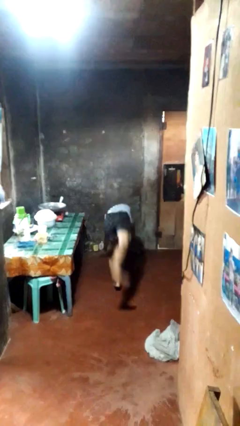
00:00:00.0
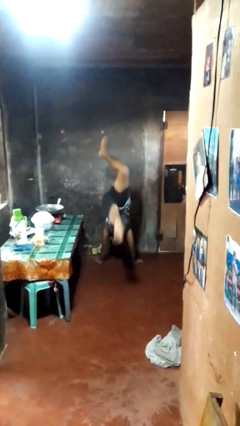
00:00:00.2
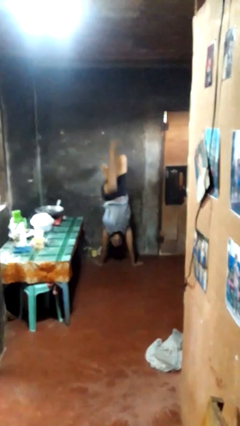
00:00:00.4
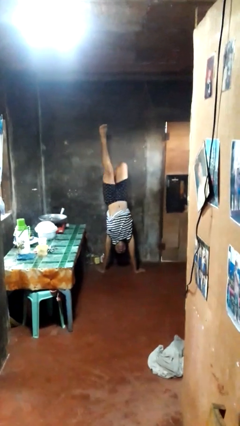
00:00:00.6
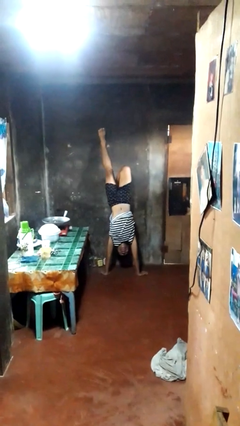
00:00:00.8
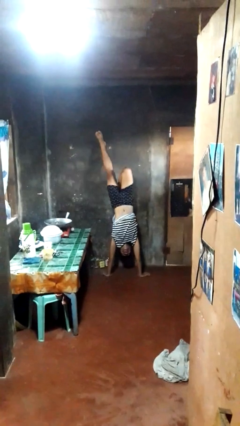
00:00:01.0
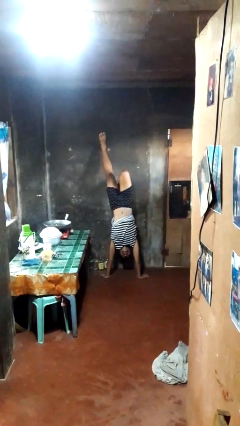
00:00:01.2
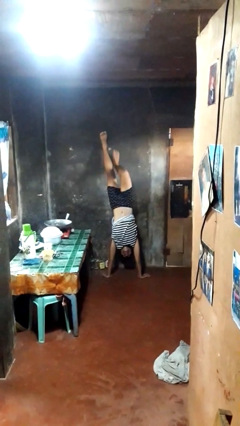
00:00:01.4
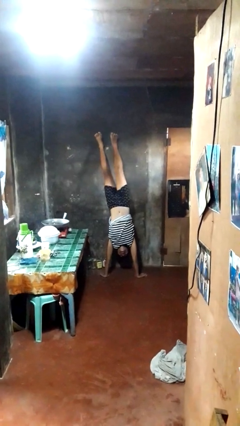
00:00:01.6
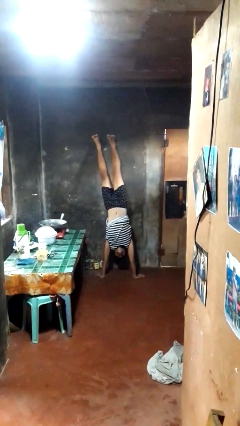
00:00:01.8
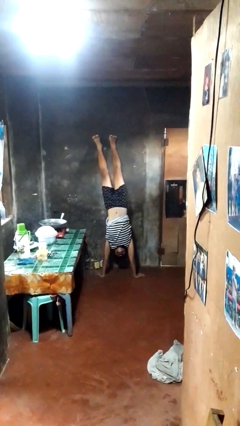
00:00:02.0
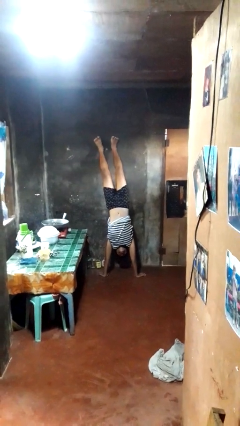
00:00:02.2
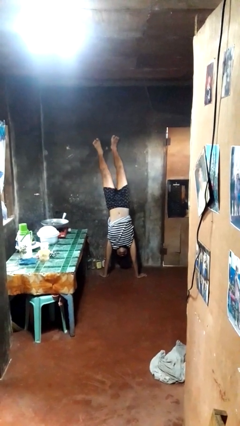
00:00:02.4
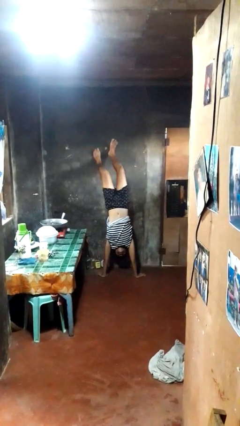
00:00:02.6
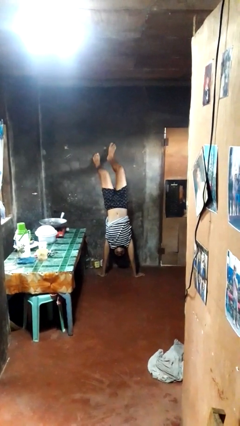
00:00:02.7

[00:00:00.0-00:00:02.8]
person handstand

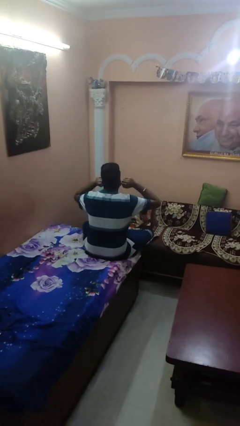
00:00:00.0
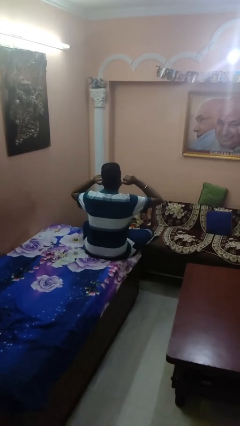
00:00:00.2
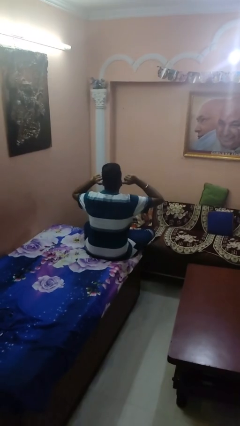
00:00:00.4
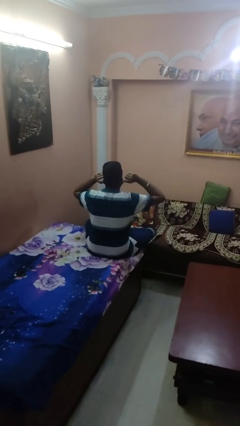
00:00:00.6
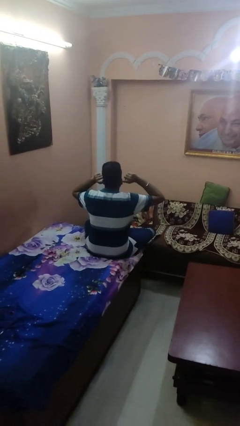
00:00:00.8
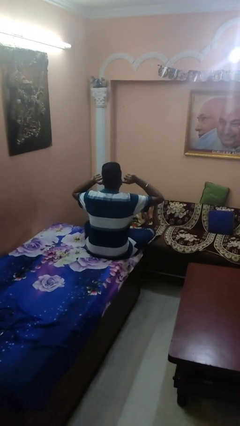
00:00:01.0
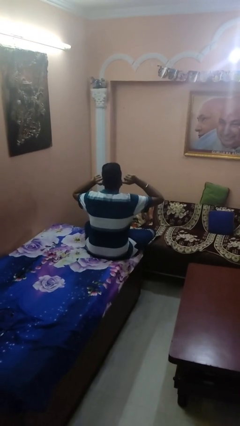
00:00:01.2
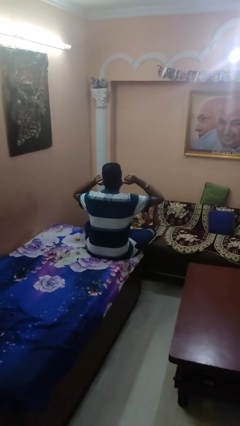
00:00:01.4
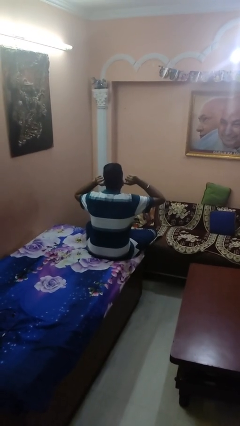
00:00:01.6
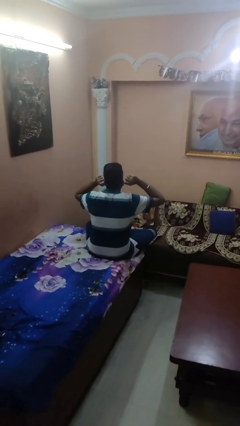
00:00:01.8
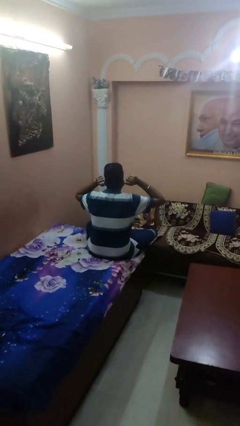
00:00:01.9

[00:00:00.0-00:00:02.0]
person puts fingers in ear

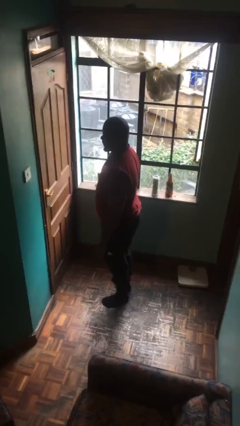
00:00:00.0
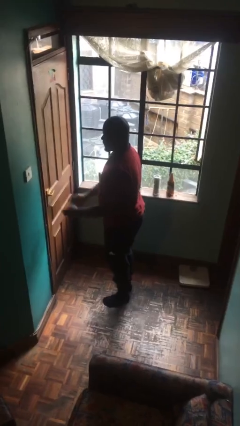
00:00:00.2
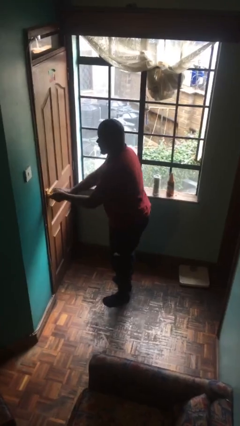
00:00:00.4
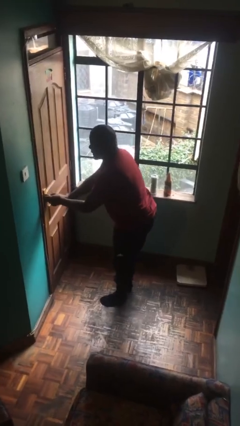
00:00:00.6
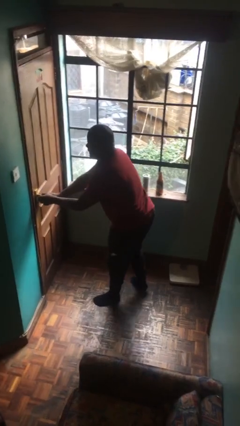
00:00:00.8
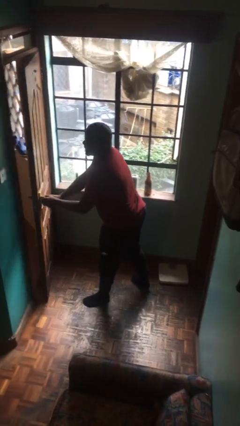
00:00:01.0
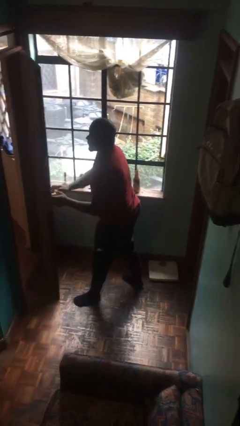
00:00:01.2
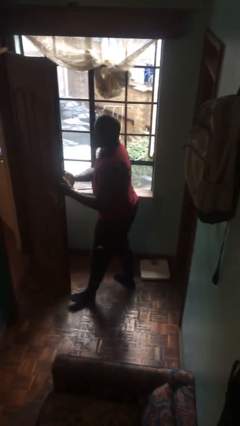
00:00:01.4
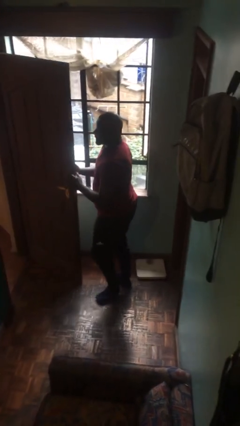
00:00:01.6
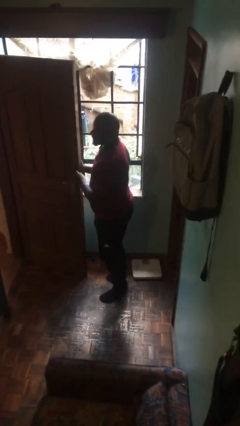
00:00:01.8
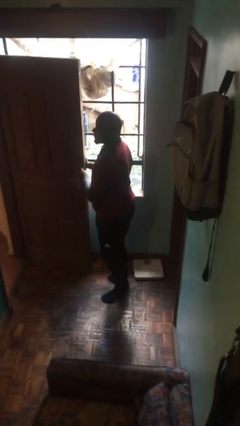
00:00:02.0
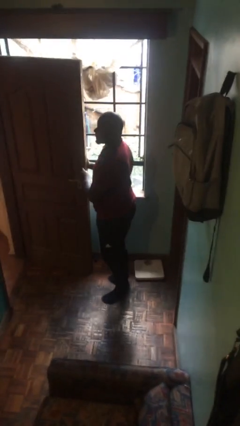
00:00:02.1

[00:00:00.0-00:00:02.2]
person opens facility door

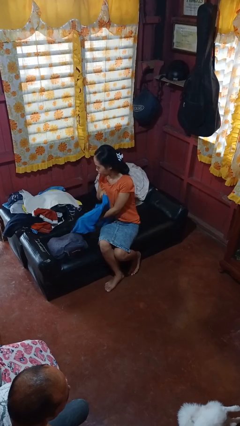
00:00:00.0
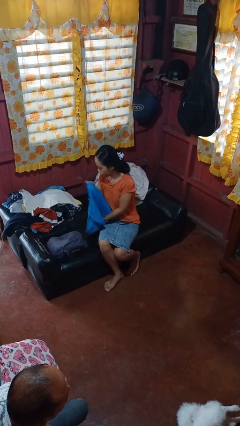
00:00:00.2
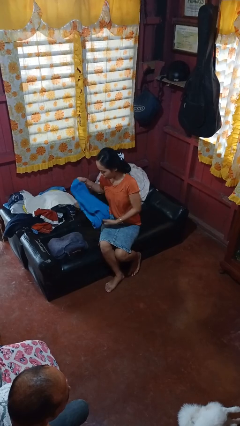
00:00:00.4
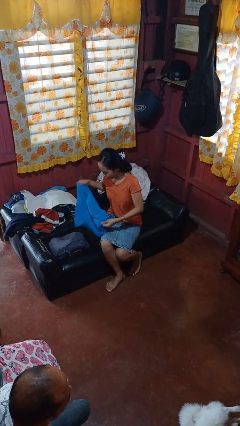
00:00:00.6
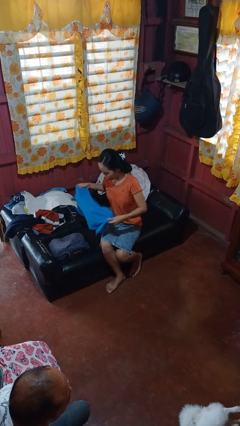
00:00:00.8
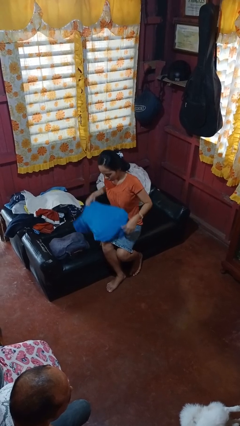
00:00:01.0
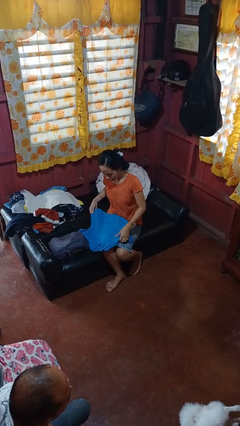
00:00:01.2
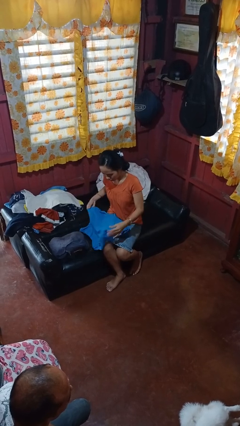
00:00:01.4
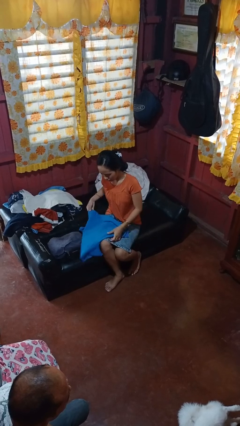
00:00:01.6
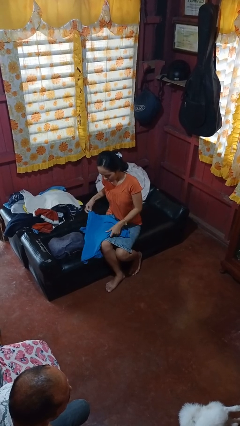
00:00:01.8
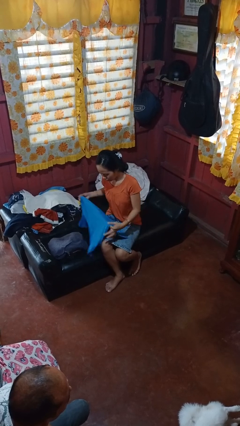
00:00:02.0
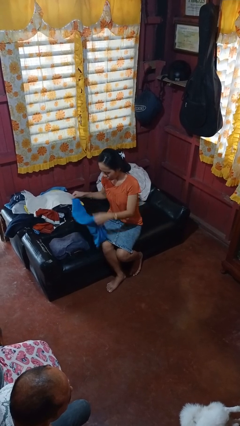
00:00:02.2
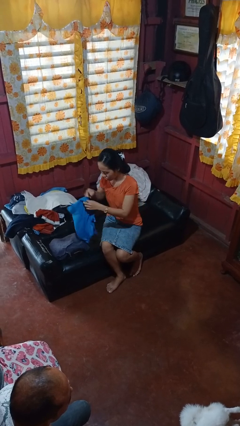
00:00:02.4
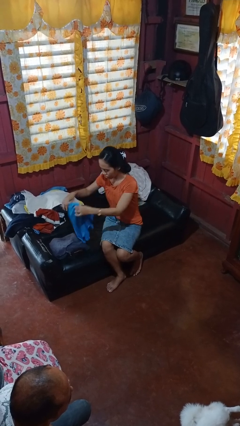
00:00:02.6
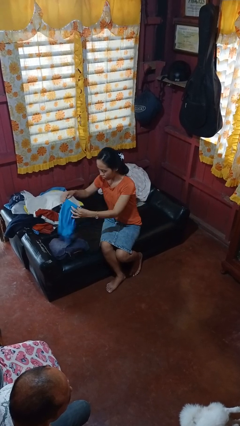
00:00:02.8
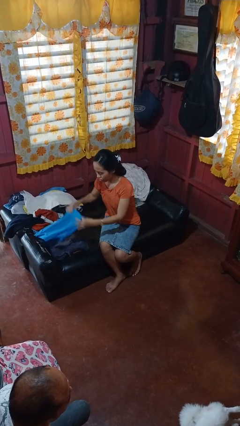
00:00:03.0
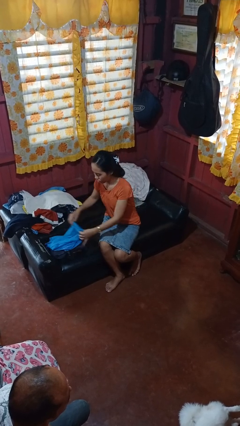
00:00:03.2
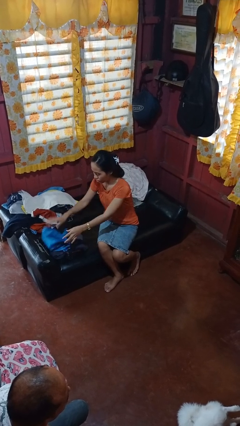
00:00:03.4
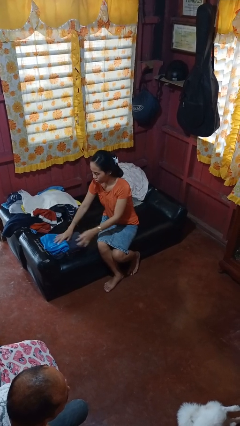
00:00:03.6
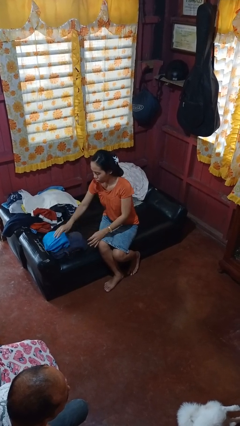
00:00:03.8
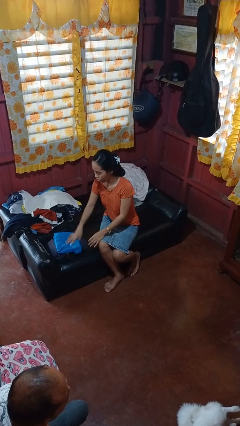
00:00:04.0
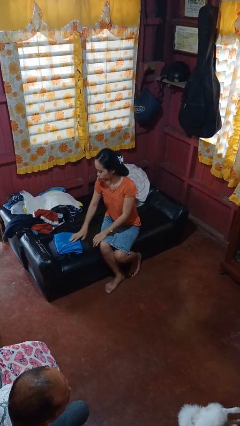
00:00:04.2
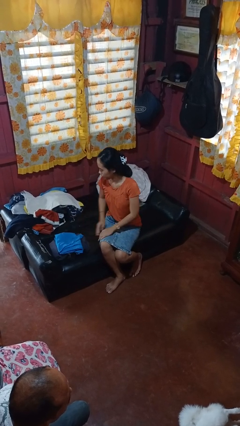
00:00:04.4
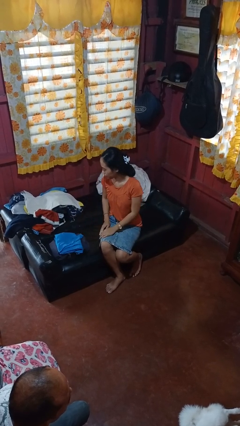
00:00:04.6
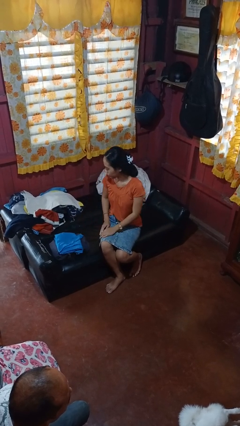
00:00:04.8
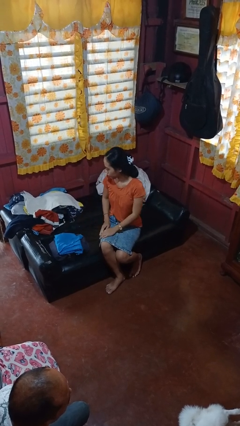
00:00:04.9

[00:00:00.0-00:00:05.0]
person folds shirt

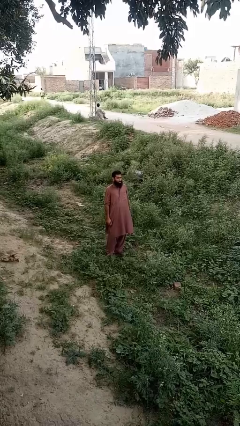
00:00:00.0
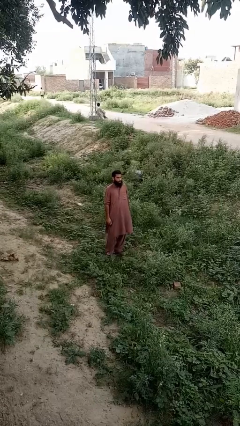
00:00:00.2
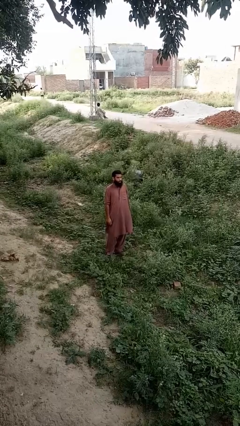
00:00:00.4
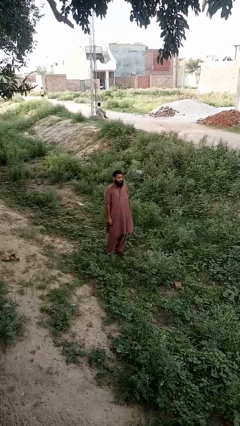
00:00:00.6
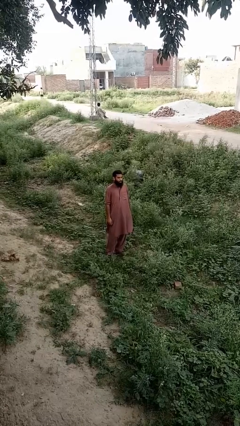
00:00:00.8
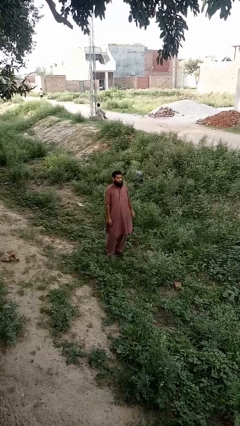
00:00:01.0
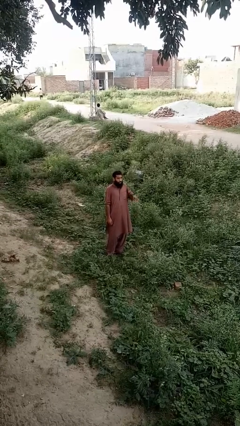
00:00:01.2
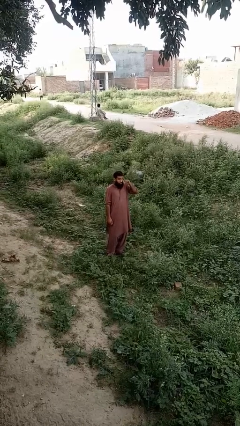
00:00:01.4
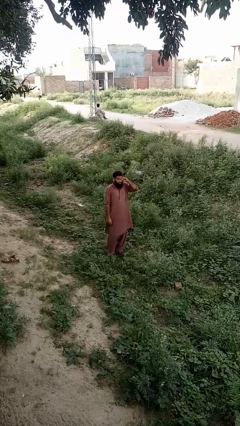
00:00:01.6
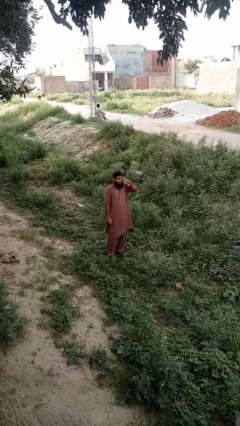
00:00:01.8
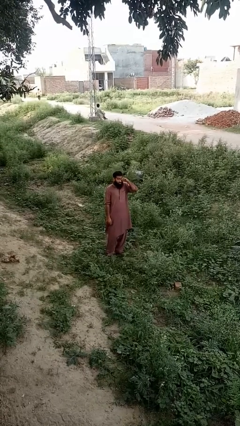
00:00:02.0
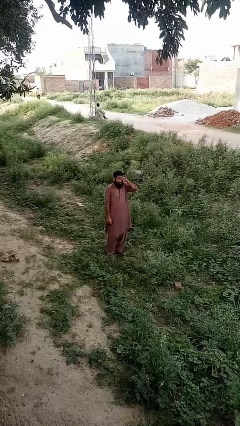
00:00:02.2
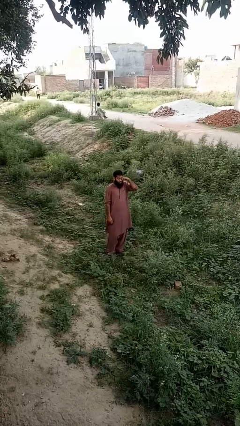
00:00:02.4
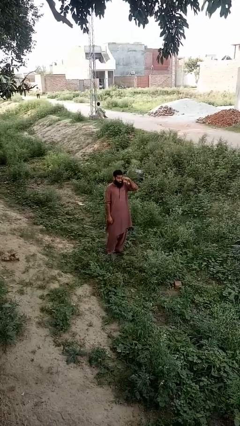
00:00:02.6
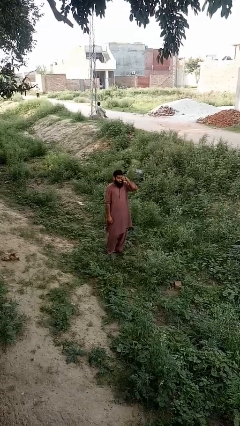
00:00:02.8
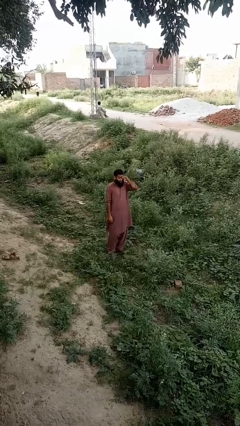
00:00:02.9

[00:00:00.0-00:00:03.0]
person rubs eyes

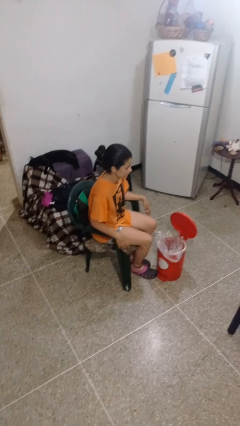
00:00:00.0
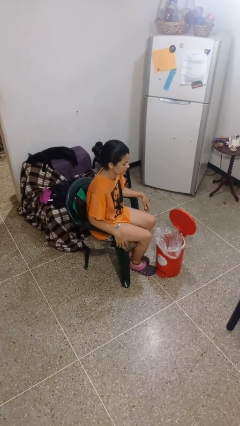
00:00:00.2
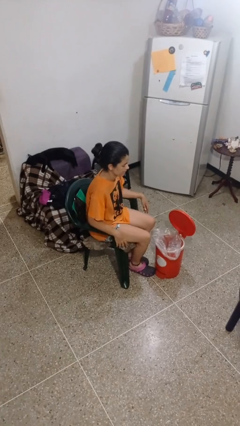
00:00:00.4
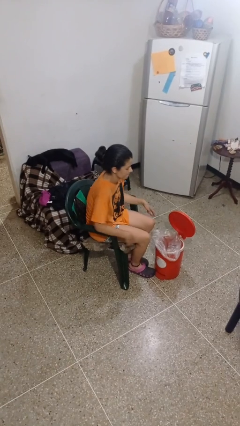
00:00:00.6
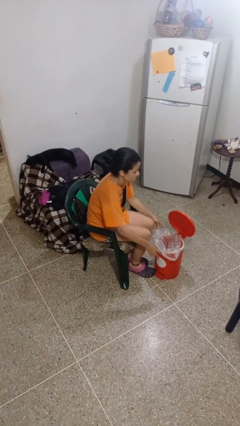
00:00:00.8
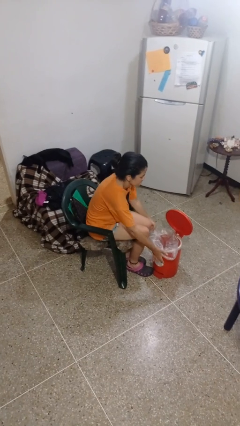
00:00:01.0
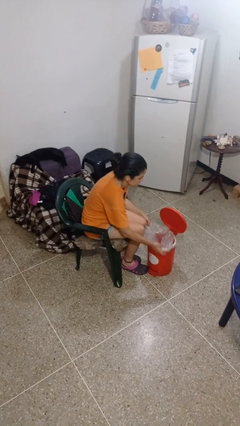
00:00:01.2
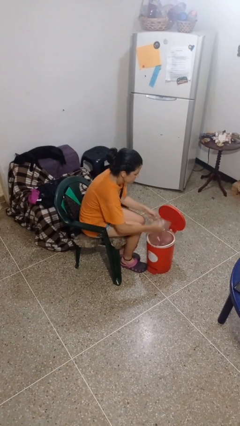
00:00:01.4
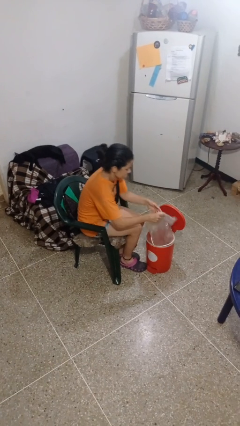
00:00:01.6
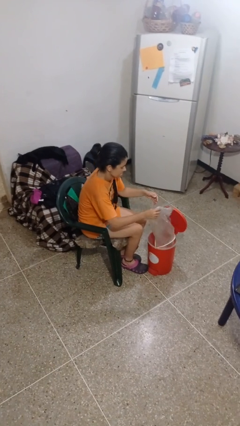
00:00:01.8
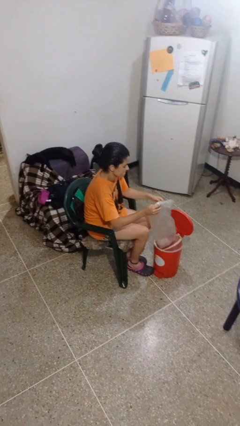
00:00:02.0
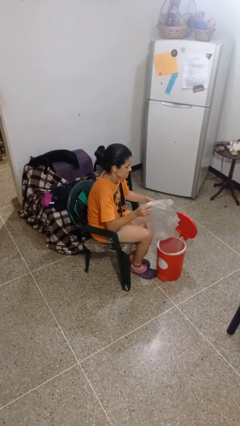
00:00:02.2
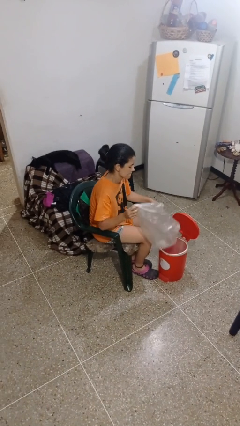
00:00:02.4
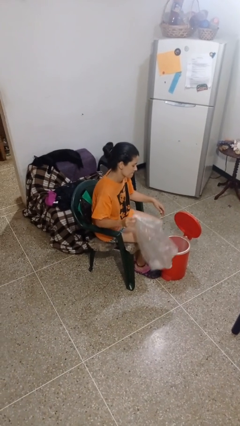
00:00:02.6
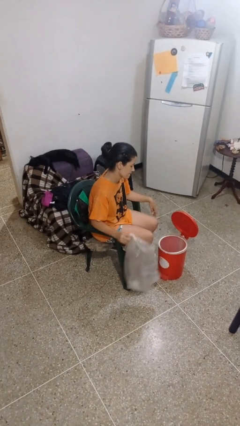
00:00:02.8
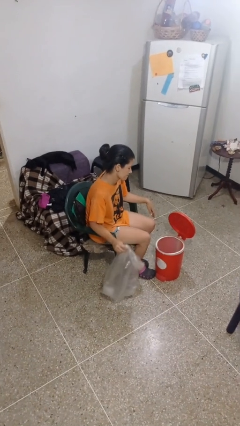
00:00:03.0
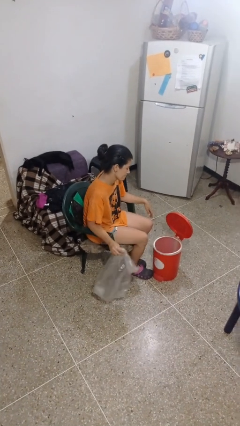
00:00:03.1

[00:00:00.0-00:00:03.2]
person removes trashbag from trashcan
